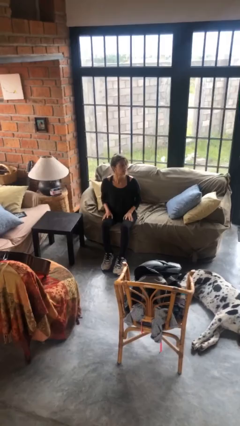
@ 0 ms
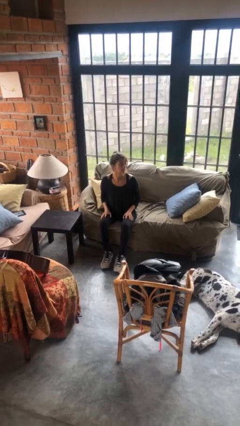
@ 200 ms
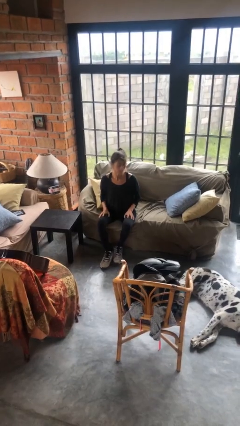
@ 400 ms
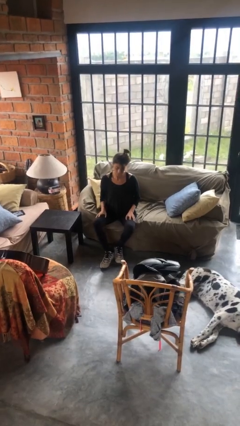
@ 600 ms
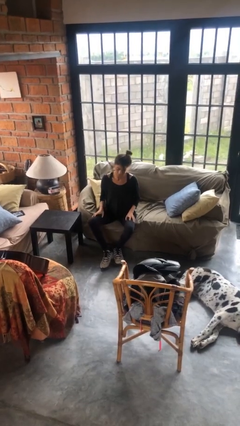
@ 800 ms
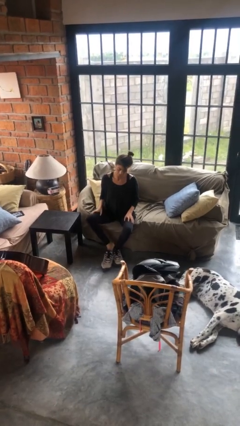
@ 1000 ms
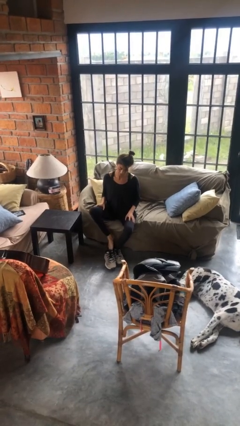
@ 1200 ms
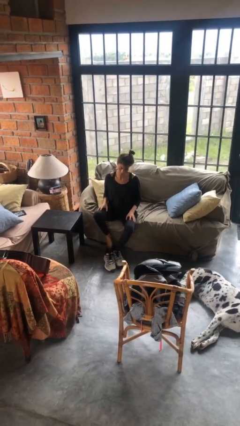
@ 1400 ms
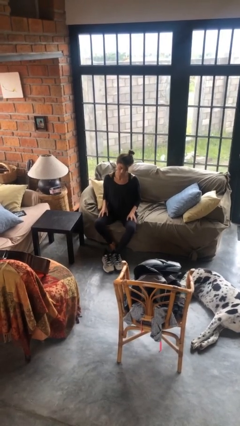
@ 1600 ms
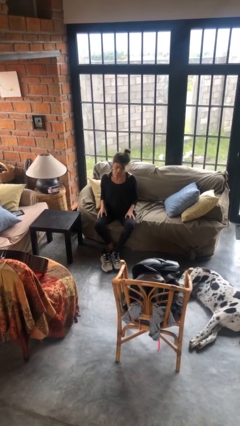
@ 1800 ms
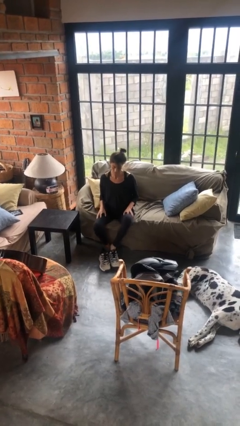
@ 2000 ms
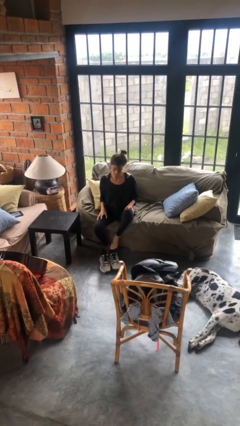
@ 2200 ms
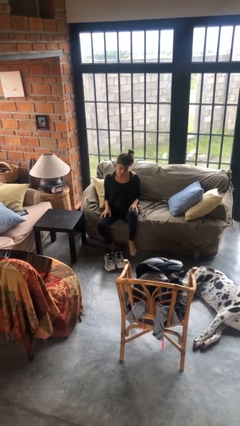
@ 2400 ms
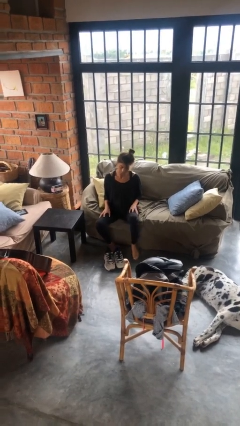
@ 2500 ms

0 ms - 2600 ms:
person takes off shoes

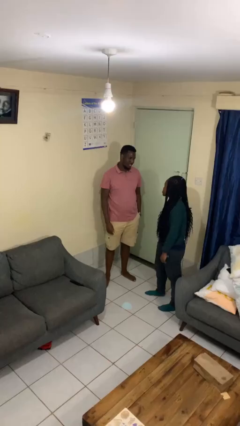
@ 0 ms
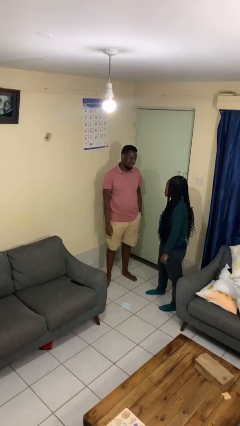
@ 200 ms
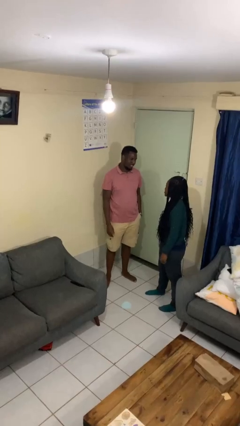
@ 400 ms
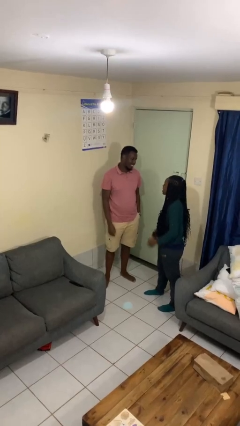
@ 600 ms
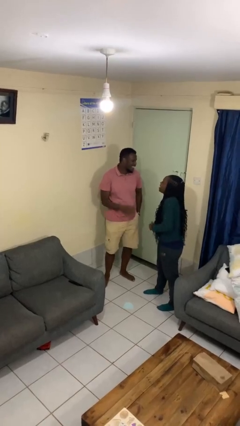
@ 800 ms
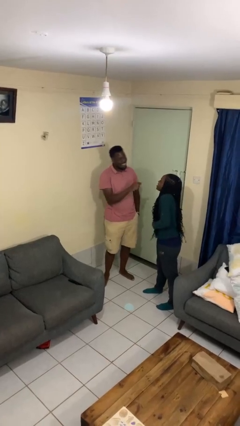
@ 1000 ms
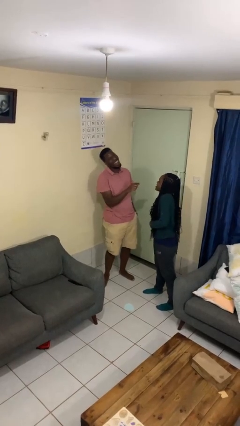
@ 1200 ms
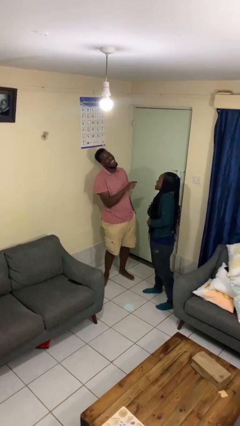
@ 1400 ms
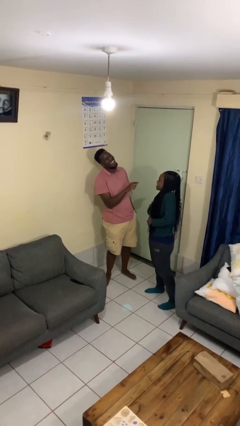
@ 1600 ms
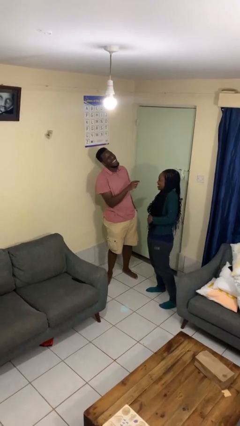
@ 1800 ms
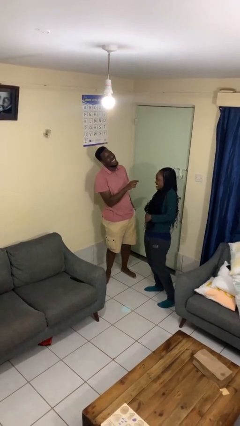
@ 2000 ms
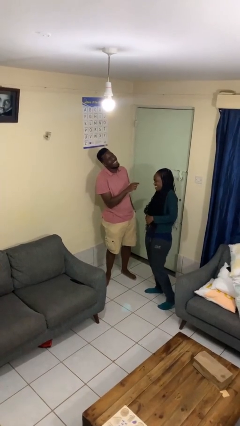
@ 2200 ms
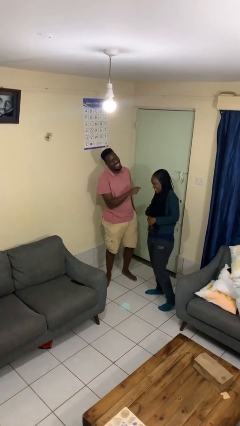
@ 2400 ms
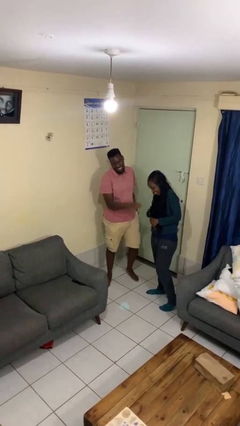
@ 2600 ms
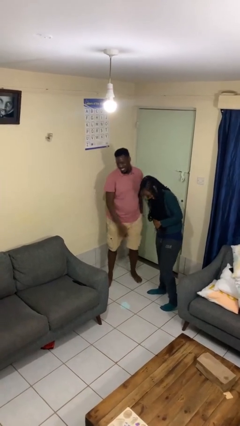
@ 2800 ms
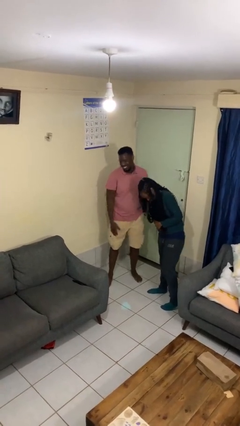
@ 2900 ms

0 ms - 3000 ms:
person laughs with person

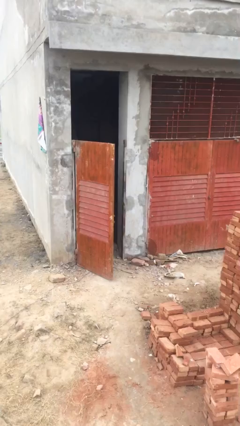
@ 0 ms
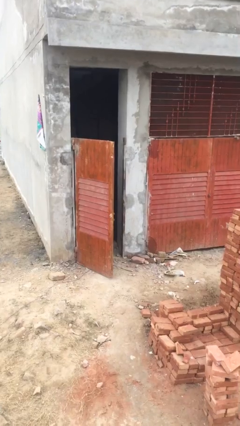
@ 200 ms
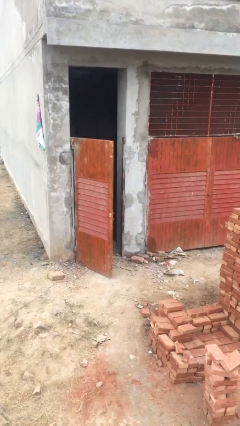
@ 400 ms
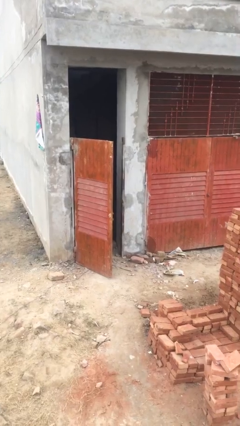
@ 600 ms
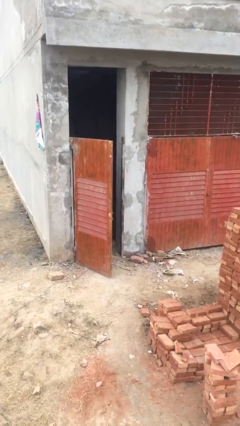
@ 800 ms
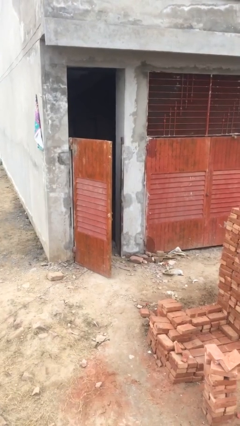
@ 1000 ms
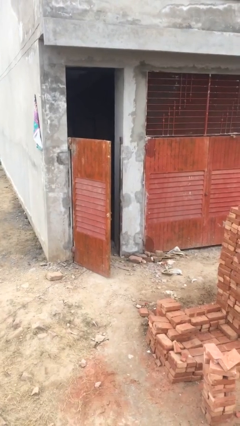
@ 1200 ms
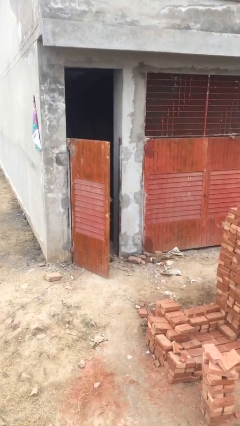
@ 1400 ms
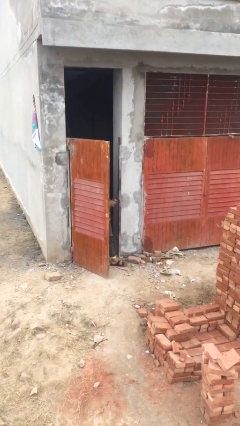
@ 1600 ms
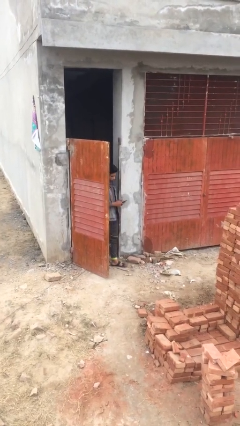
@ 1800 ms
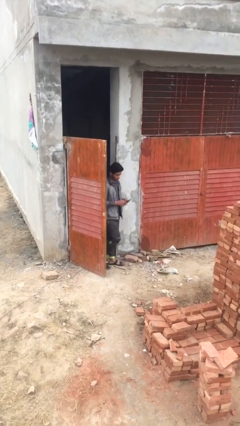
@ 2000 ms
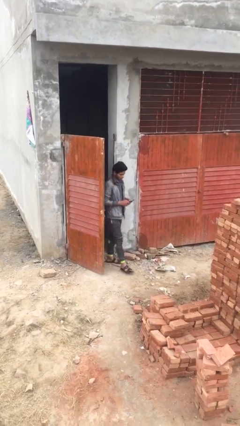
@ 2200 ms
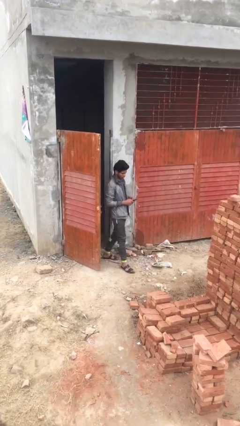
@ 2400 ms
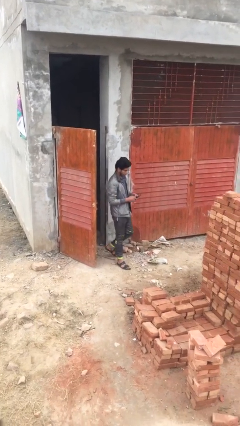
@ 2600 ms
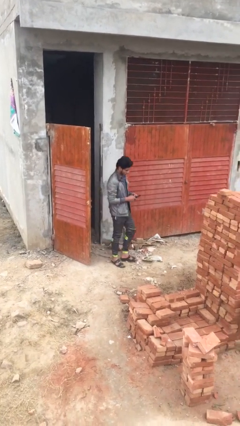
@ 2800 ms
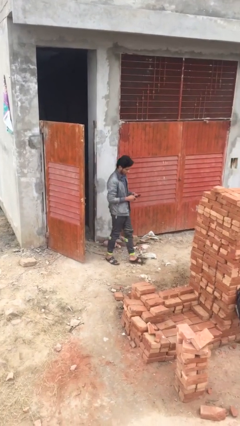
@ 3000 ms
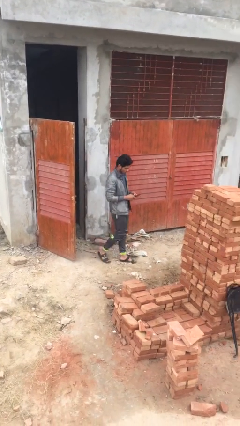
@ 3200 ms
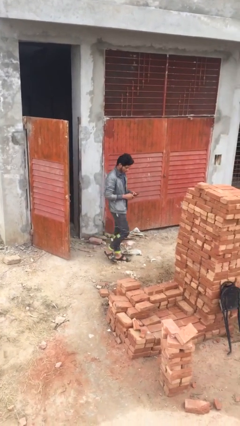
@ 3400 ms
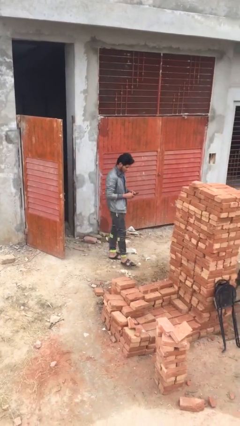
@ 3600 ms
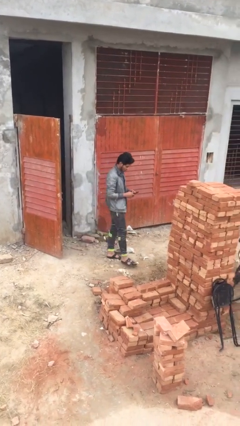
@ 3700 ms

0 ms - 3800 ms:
person enters scene through structure

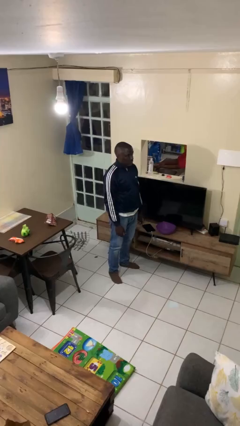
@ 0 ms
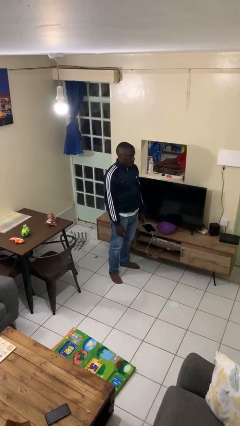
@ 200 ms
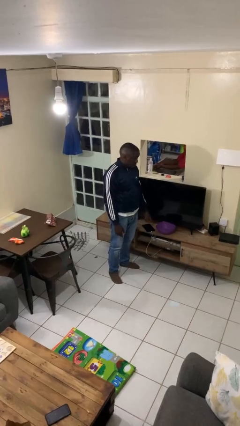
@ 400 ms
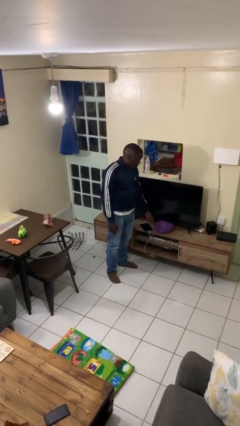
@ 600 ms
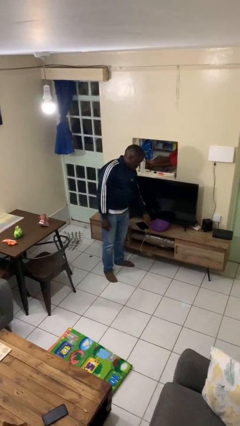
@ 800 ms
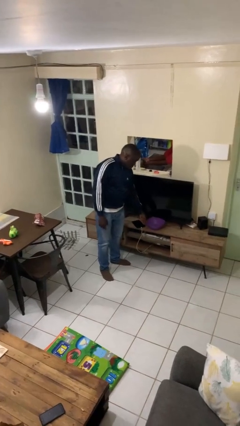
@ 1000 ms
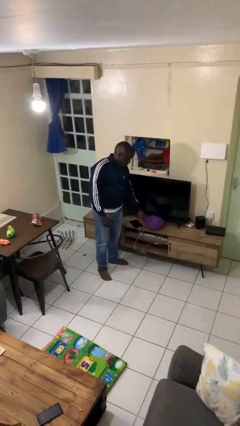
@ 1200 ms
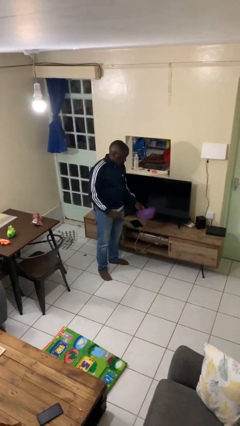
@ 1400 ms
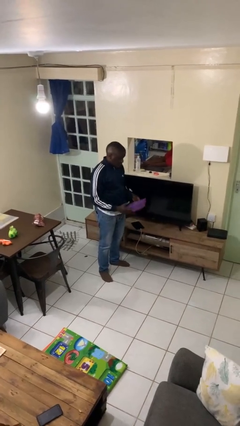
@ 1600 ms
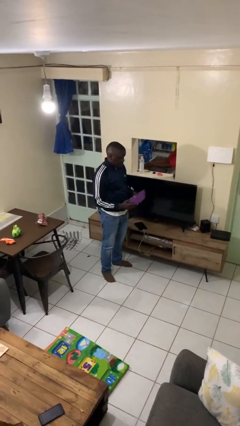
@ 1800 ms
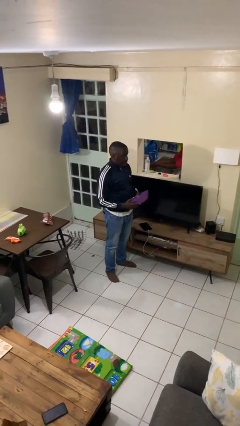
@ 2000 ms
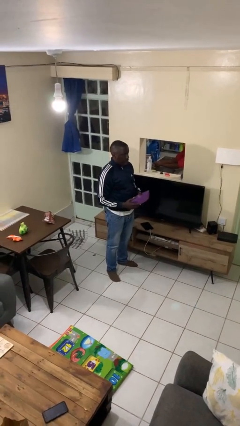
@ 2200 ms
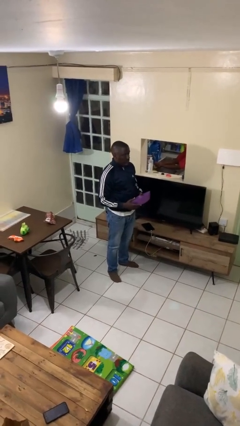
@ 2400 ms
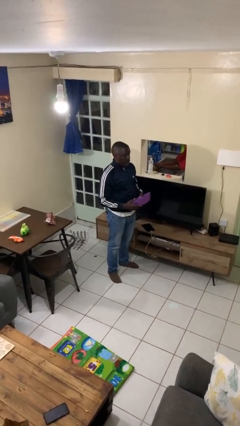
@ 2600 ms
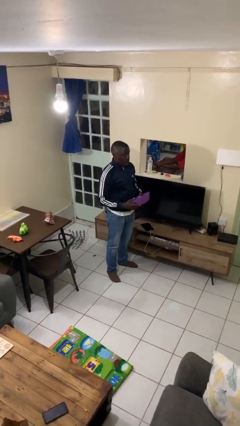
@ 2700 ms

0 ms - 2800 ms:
person picks up object from countertop

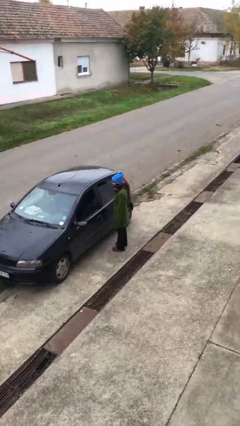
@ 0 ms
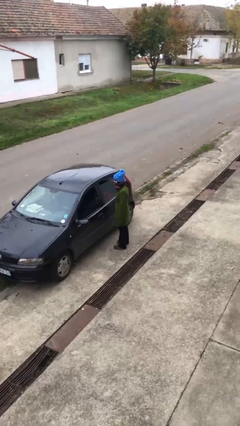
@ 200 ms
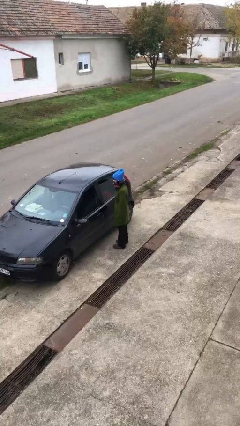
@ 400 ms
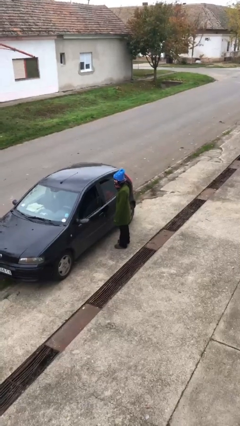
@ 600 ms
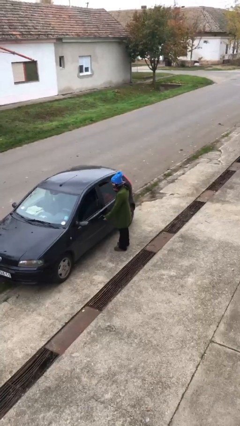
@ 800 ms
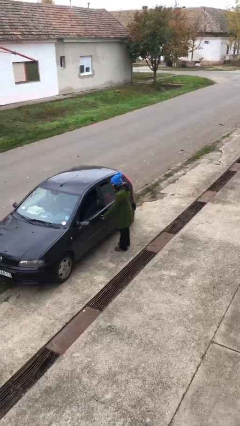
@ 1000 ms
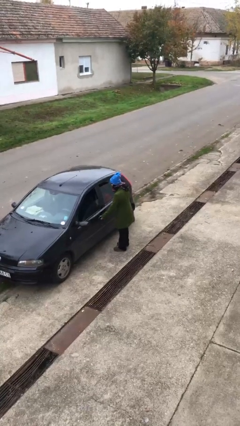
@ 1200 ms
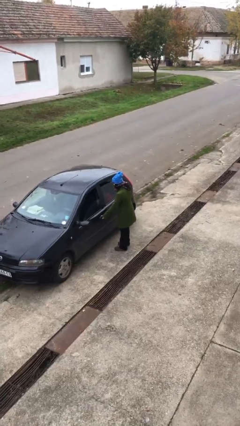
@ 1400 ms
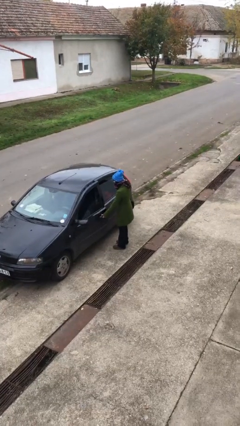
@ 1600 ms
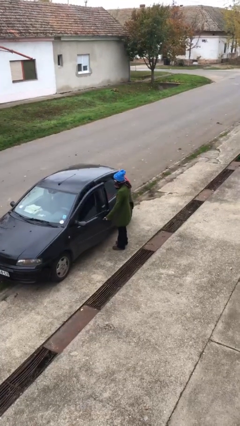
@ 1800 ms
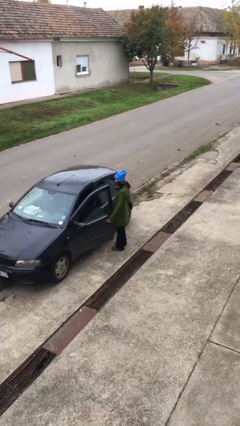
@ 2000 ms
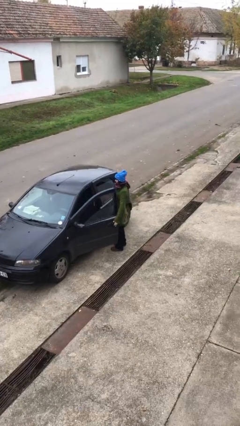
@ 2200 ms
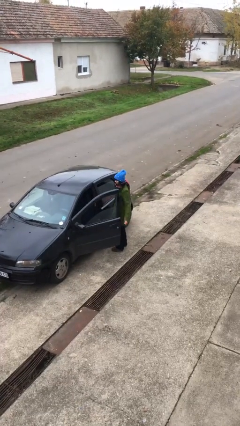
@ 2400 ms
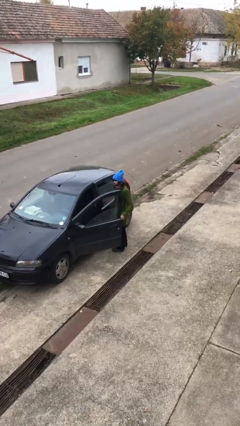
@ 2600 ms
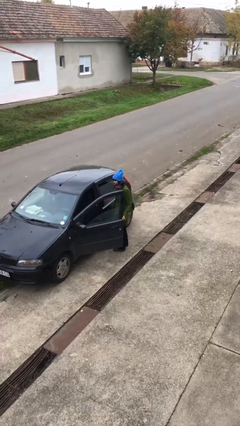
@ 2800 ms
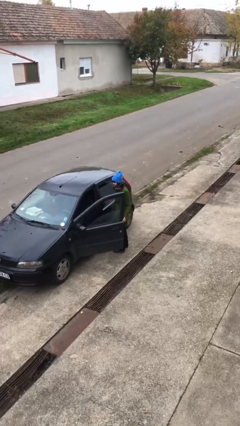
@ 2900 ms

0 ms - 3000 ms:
person opens car door

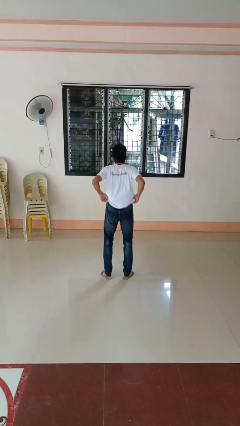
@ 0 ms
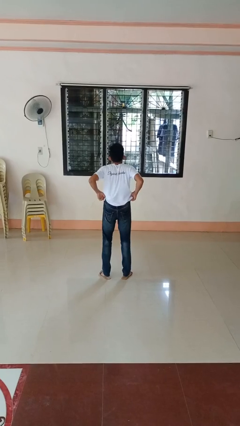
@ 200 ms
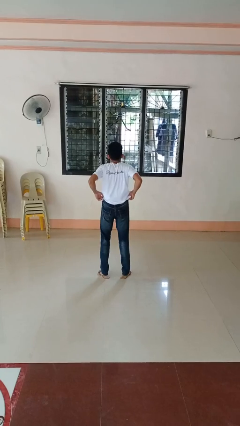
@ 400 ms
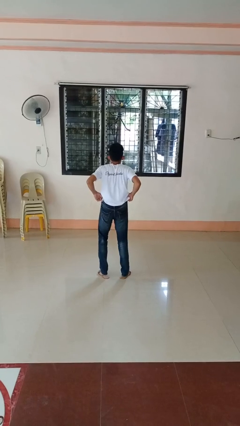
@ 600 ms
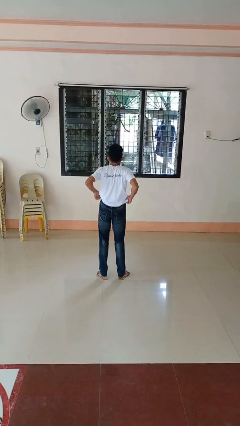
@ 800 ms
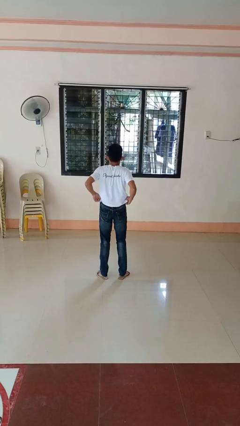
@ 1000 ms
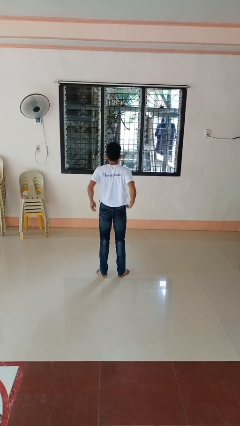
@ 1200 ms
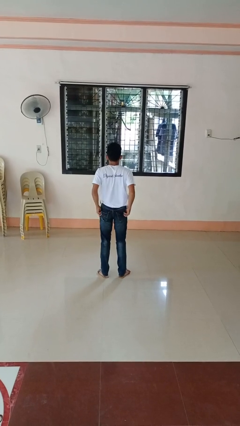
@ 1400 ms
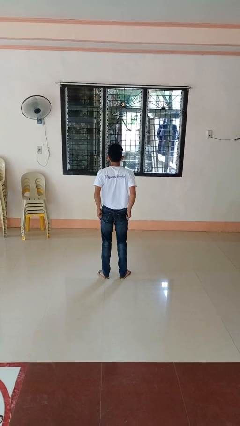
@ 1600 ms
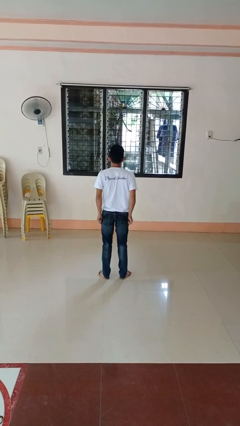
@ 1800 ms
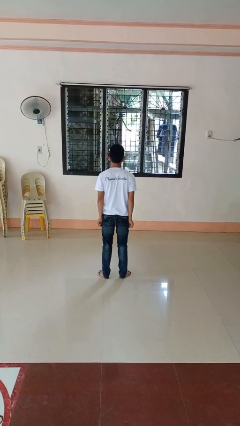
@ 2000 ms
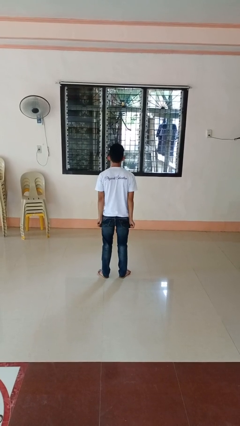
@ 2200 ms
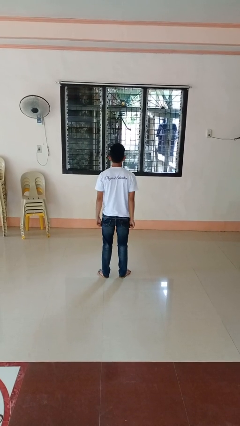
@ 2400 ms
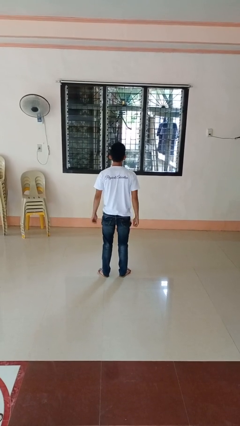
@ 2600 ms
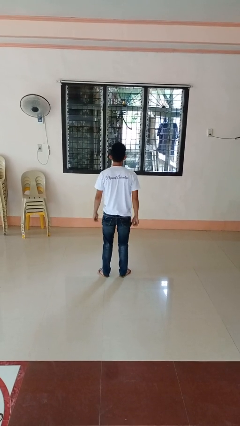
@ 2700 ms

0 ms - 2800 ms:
person hikes up pants
